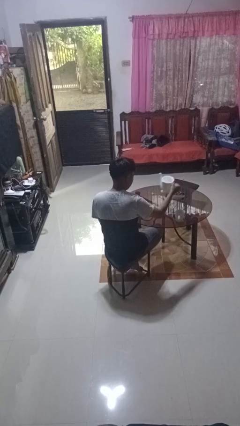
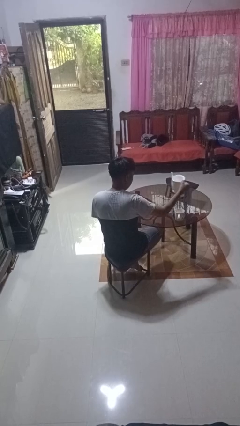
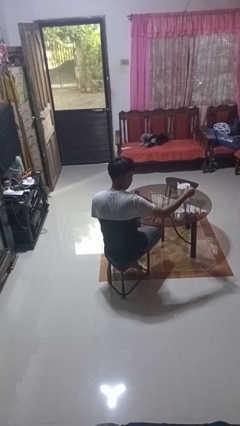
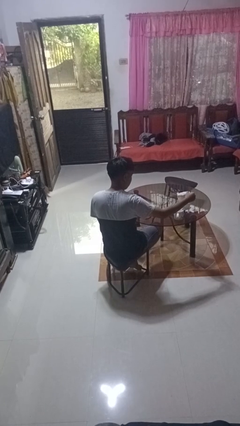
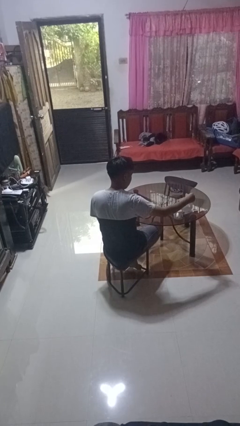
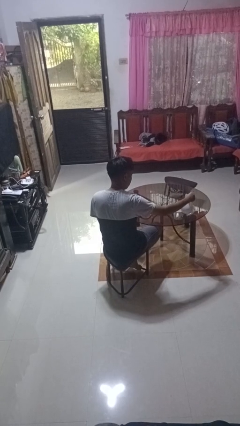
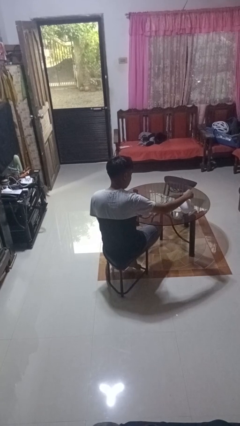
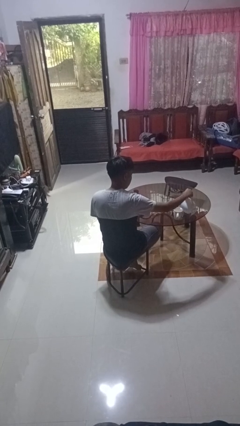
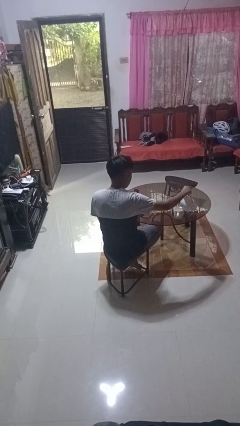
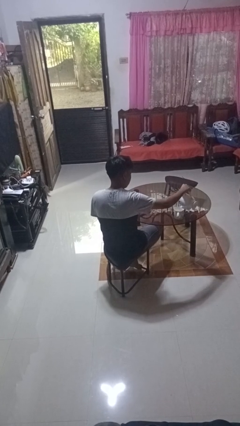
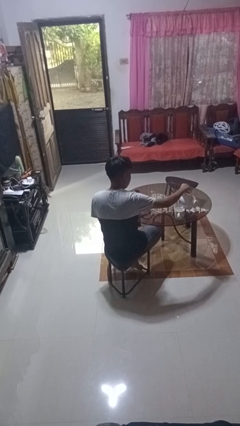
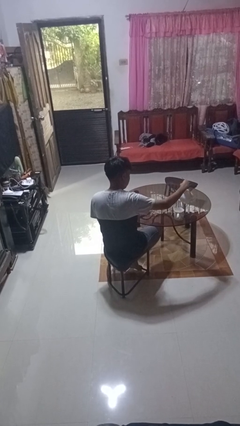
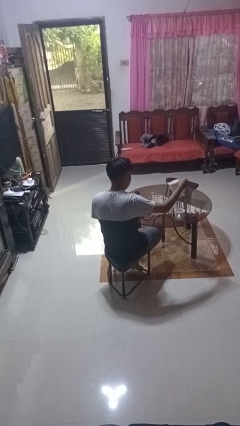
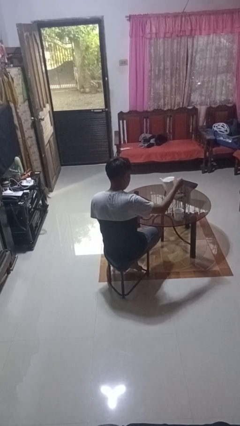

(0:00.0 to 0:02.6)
person pours coffee into mug

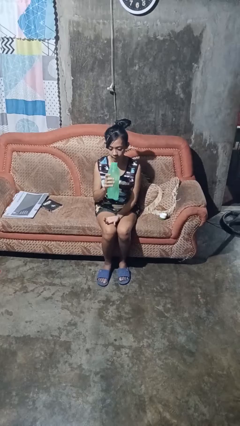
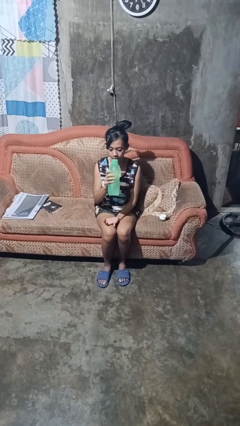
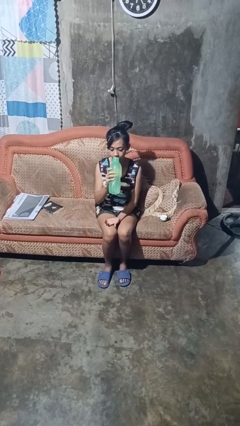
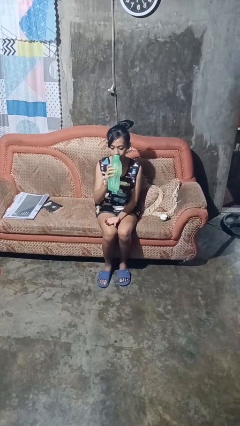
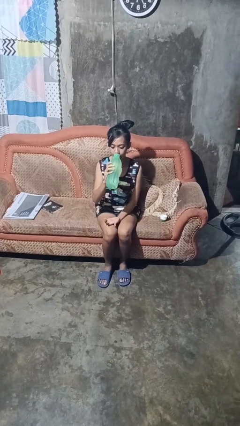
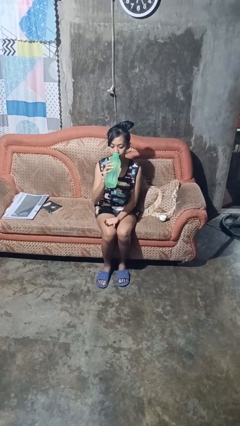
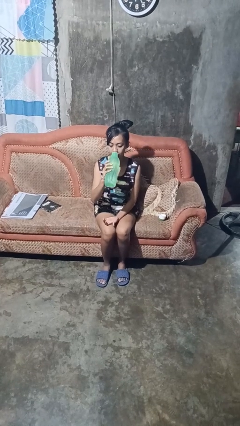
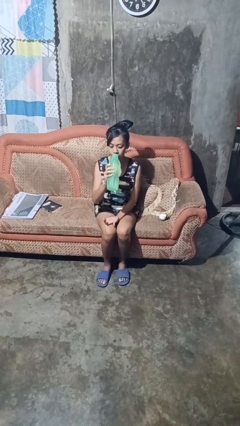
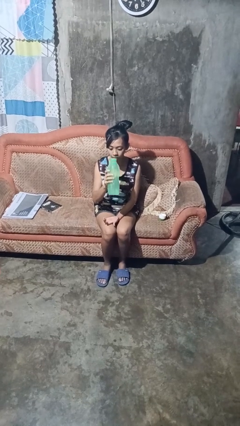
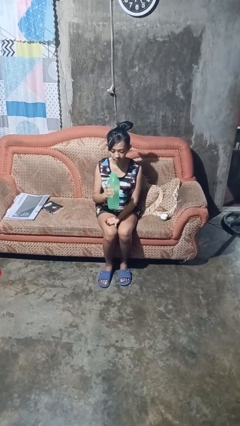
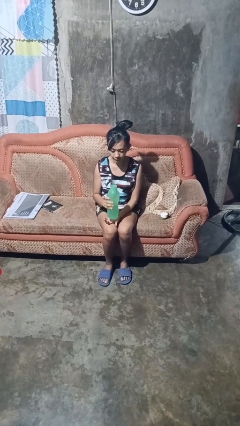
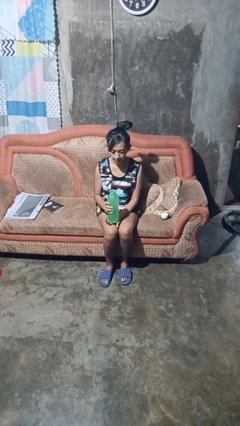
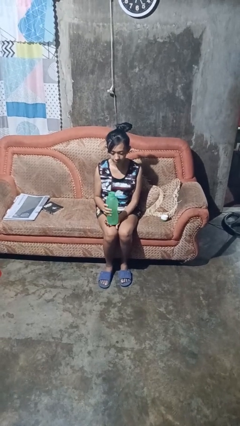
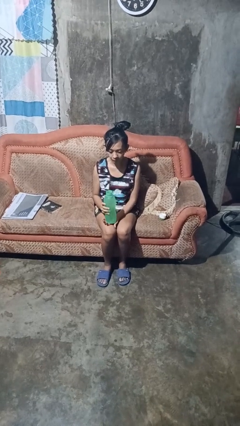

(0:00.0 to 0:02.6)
person drinks from bottle

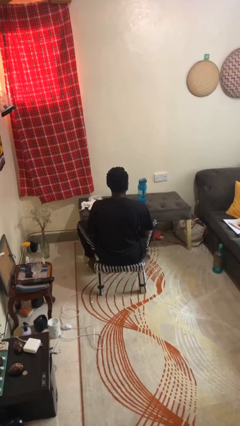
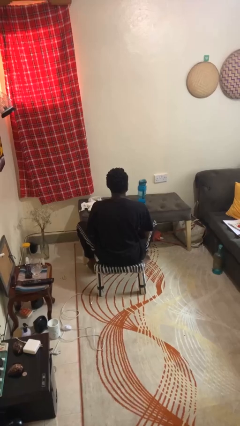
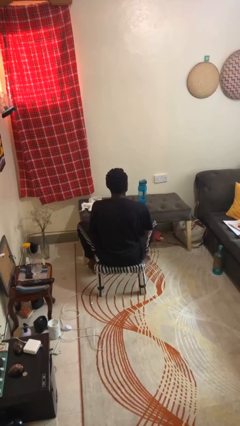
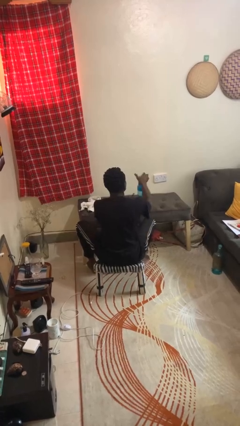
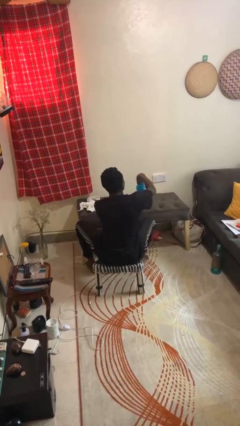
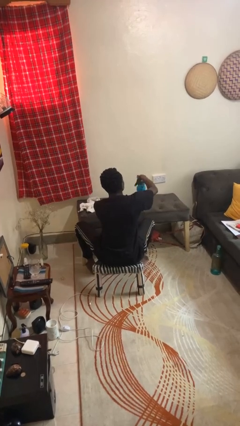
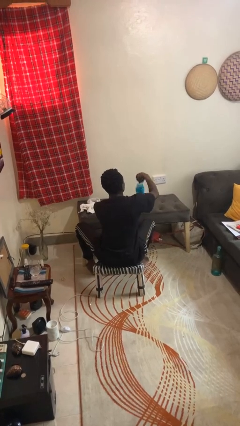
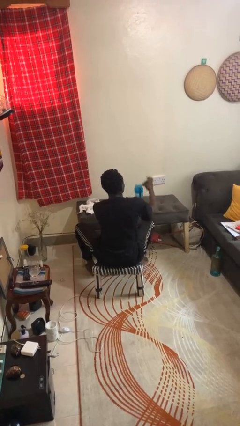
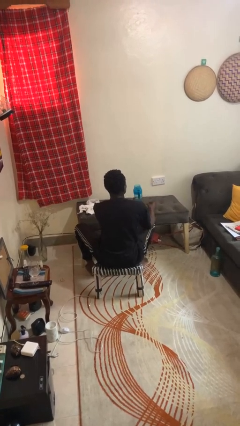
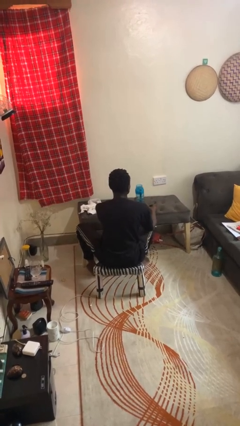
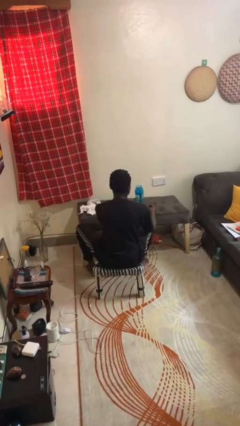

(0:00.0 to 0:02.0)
person opens jar

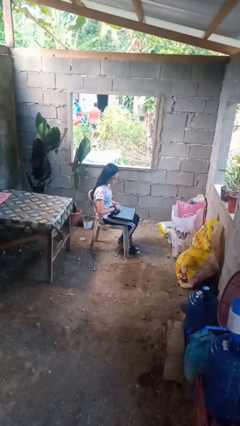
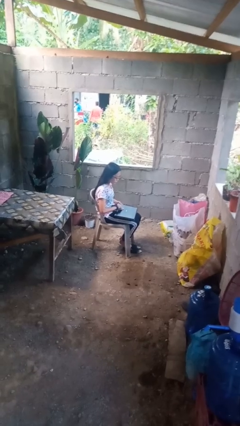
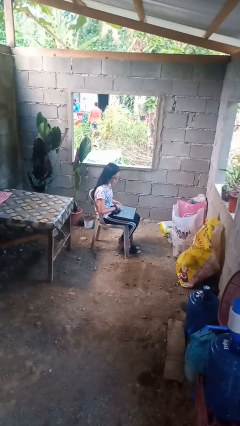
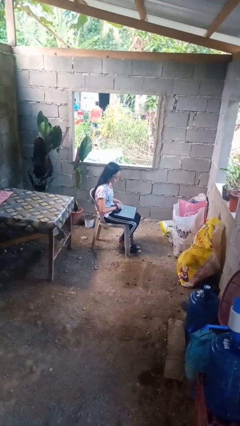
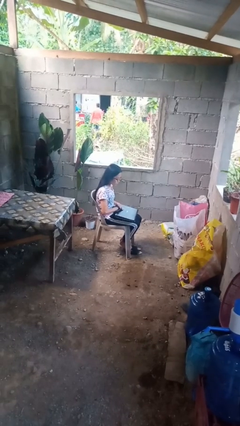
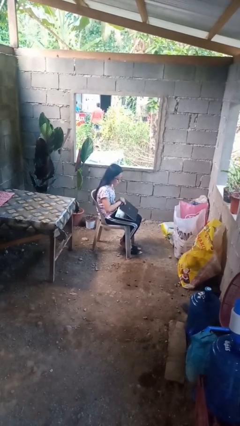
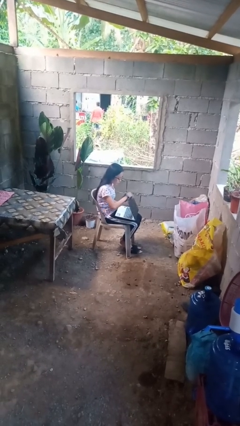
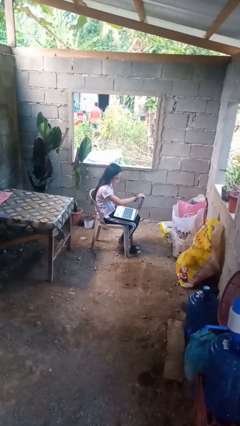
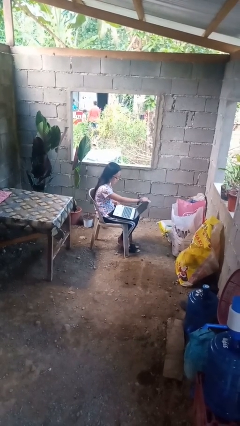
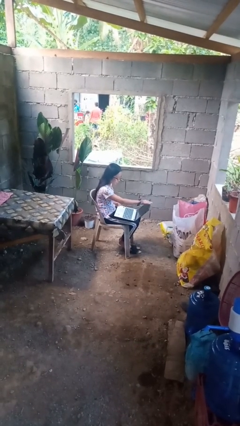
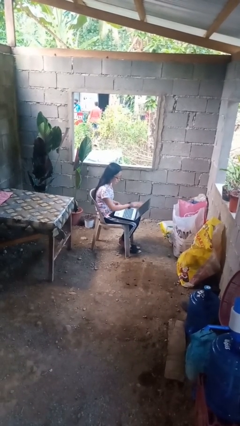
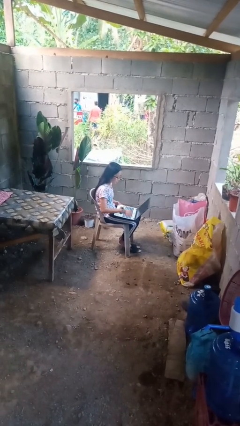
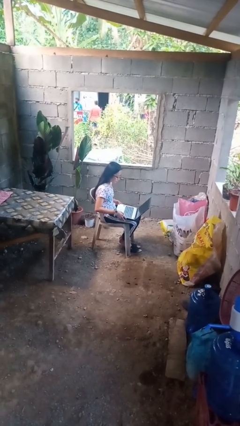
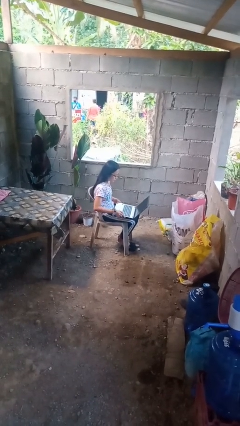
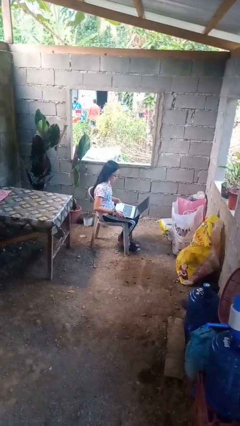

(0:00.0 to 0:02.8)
person opens laptop

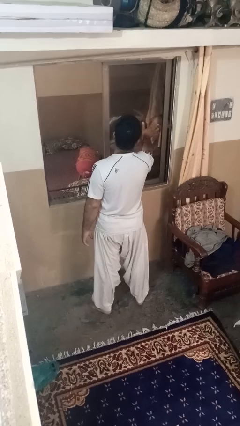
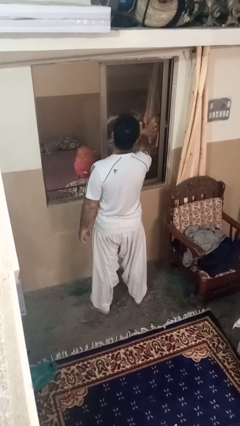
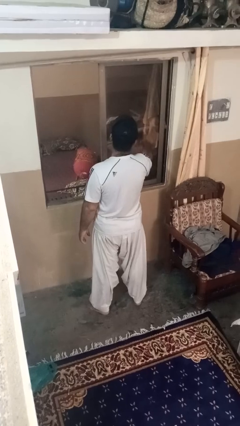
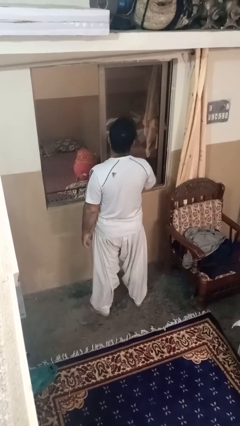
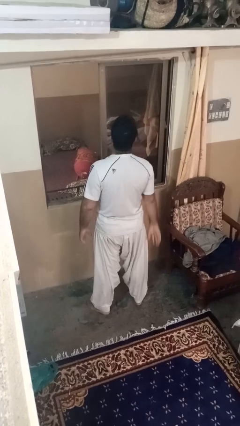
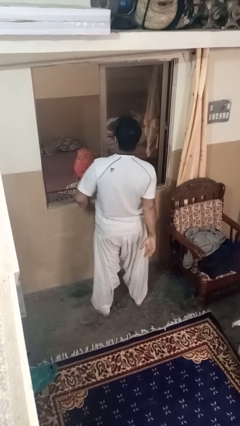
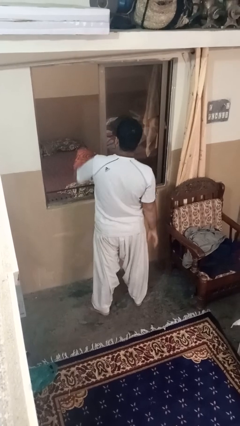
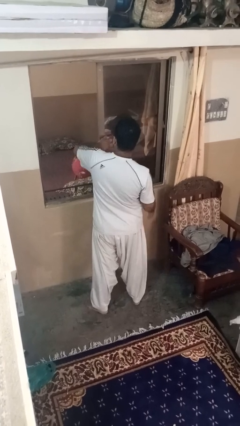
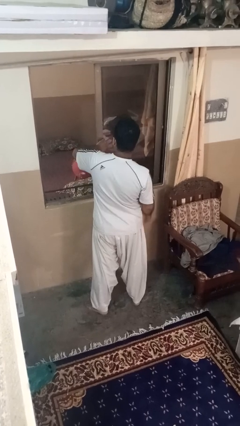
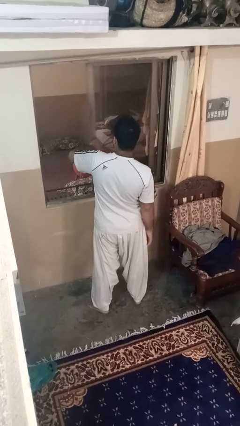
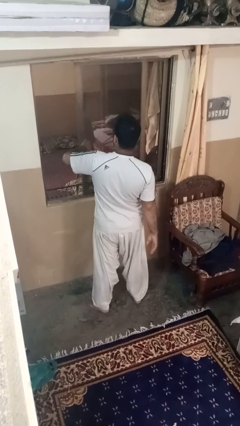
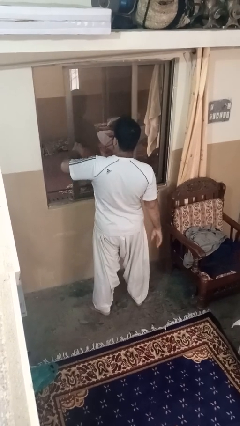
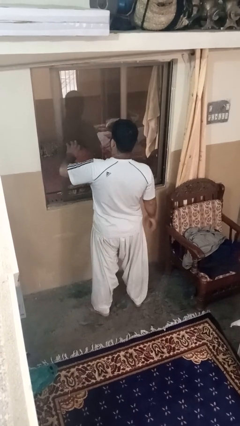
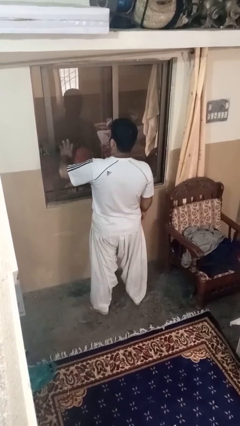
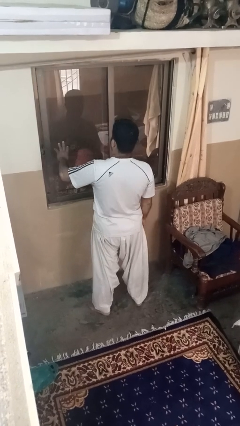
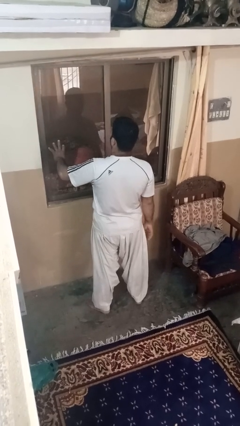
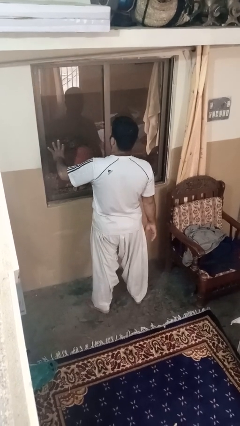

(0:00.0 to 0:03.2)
person closes home window

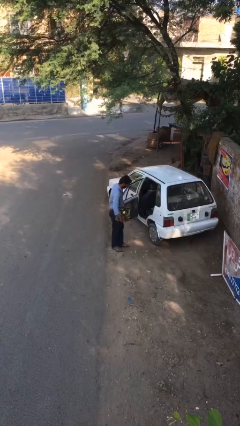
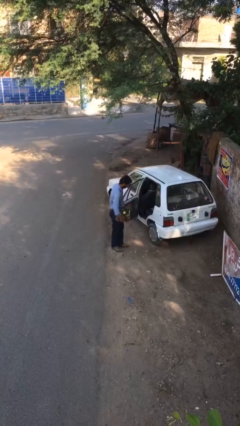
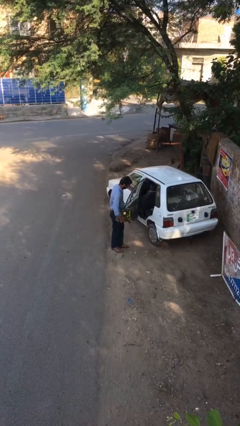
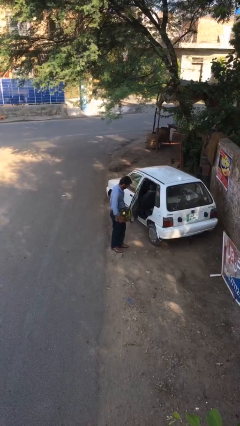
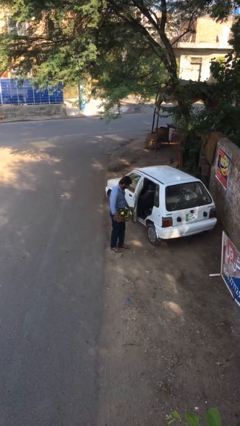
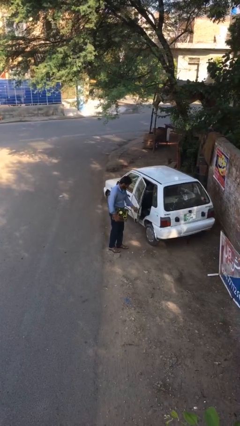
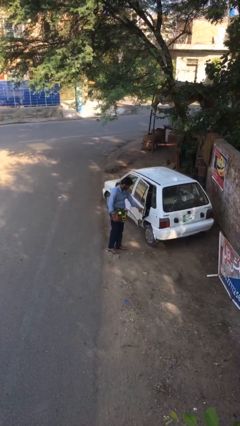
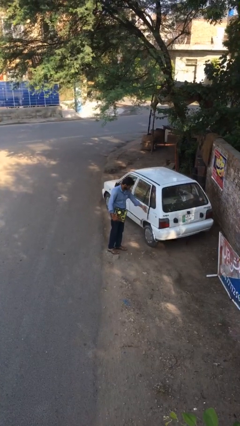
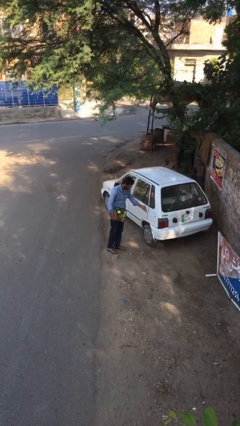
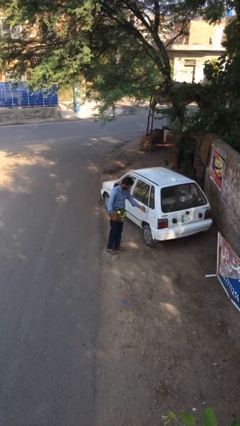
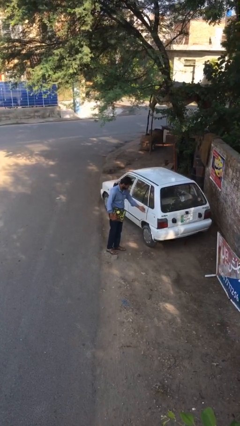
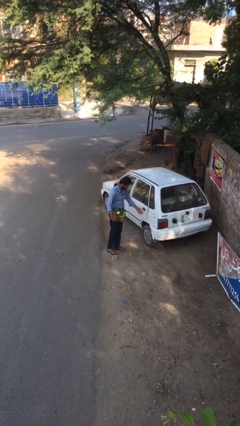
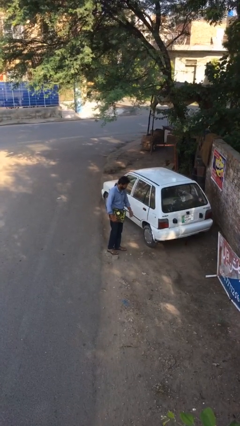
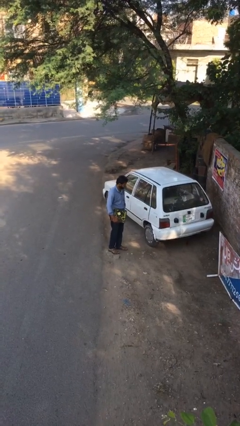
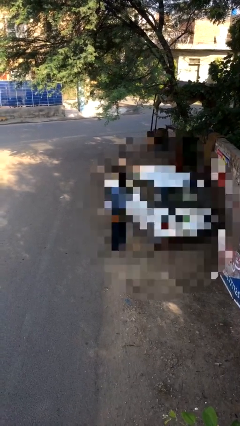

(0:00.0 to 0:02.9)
person closes car door

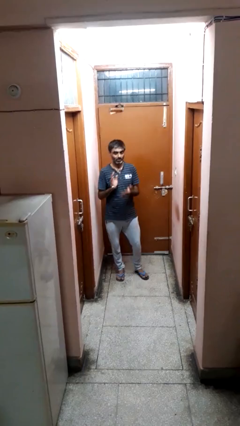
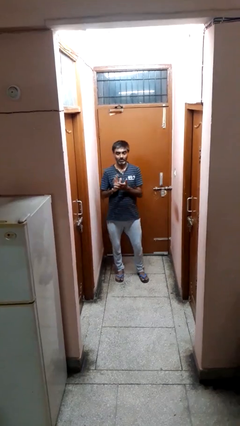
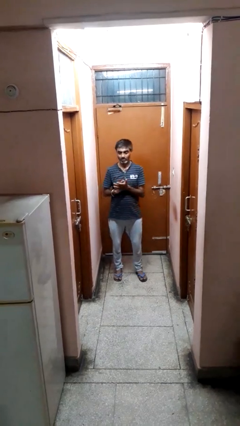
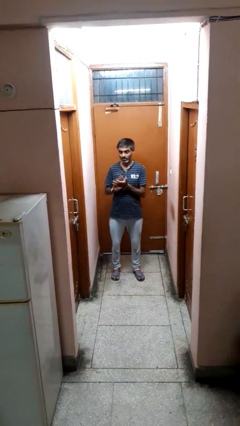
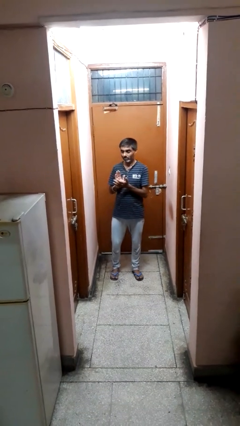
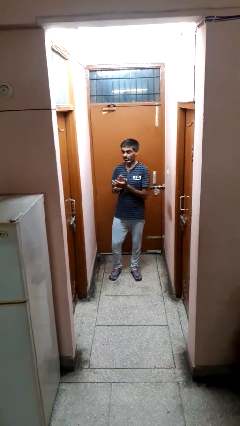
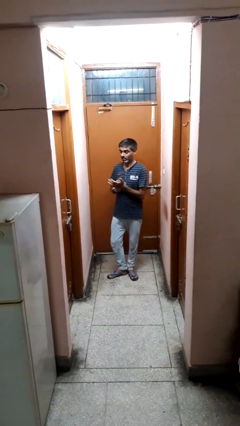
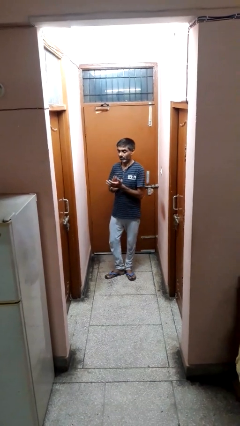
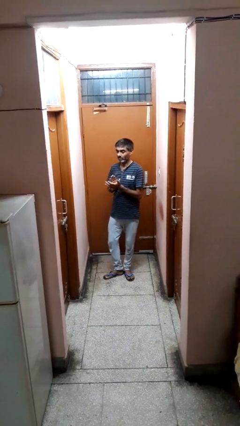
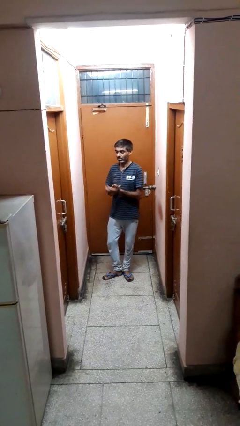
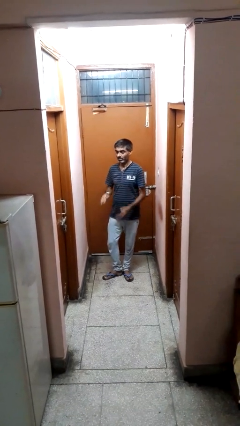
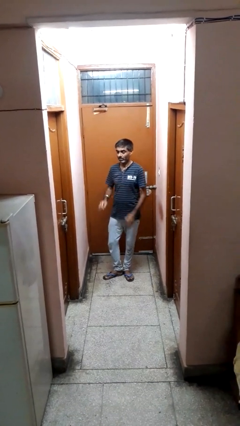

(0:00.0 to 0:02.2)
person claps hands
